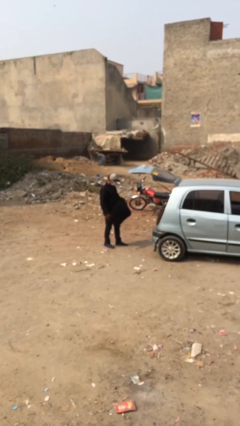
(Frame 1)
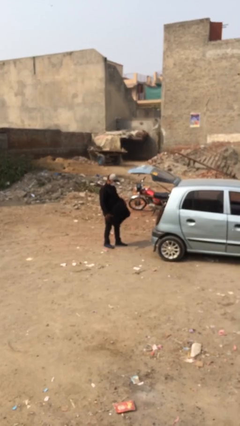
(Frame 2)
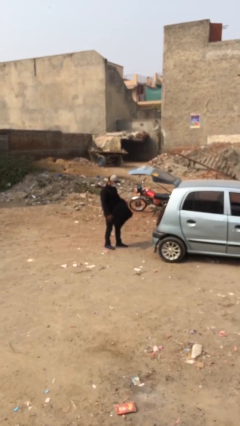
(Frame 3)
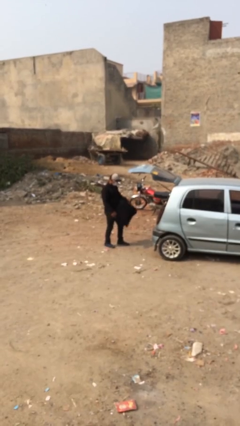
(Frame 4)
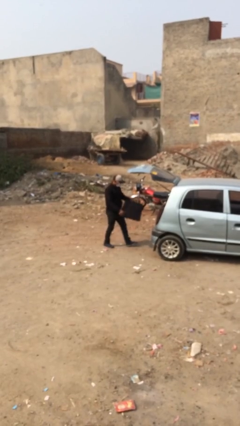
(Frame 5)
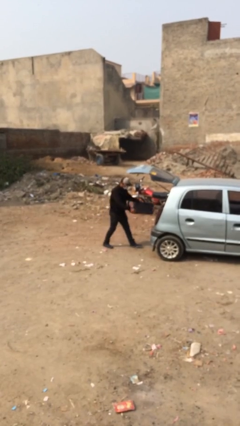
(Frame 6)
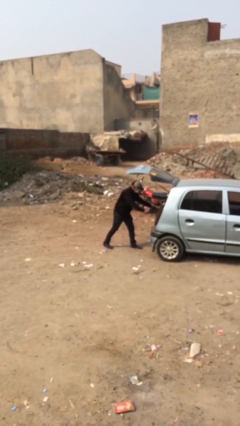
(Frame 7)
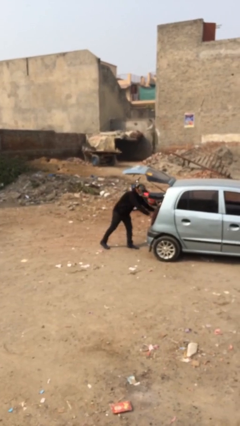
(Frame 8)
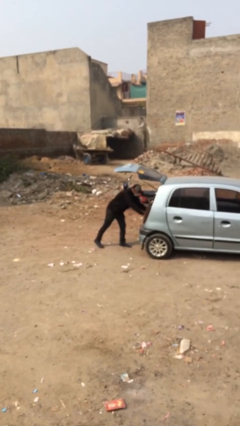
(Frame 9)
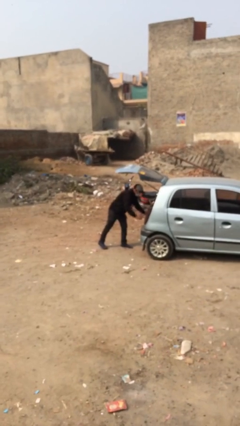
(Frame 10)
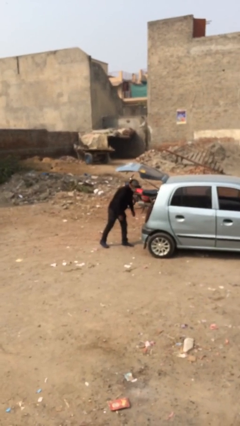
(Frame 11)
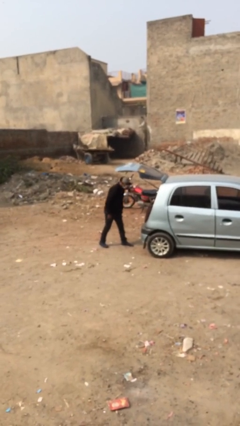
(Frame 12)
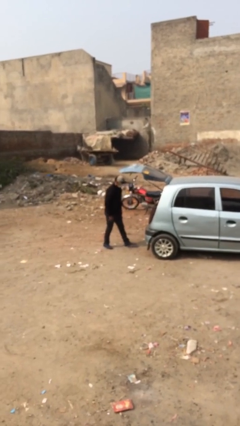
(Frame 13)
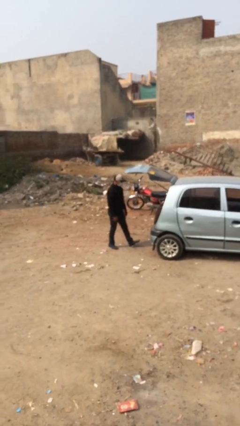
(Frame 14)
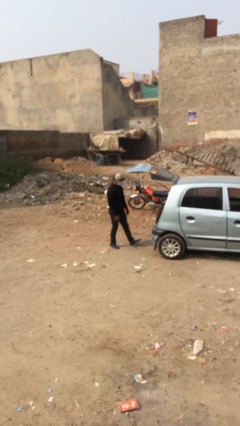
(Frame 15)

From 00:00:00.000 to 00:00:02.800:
person loads car

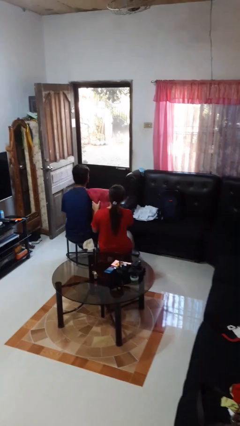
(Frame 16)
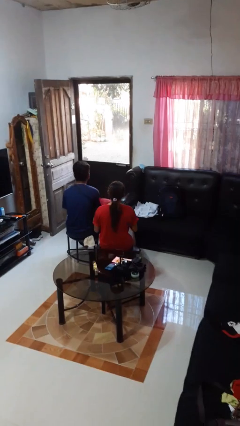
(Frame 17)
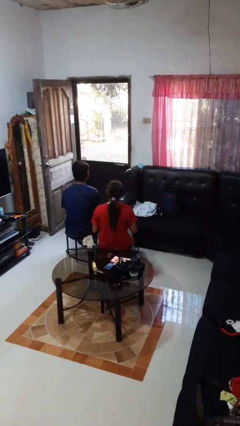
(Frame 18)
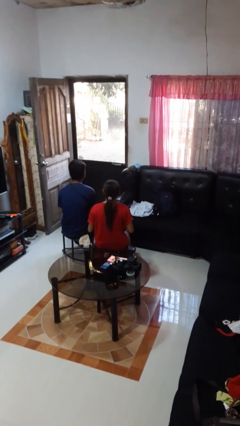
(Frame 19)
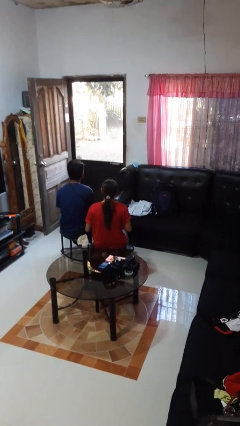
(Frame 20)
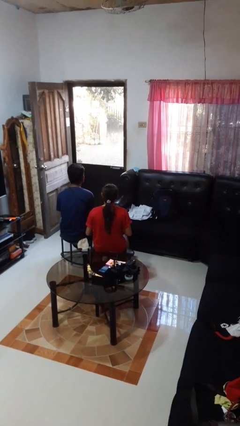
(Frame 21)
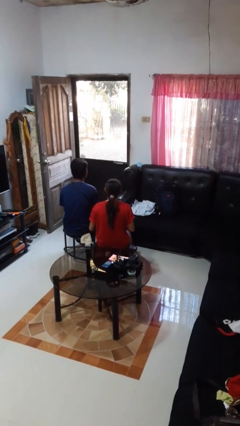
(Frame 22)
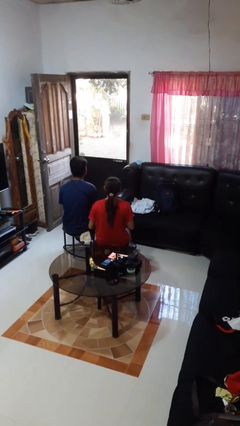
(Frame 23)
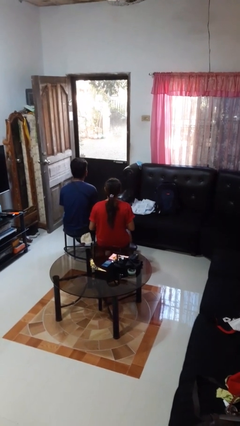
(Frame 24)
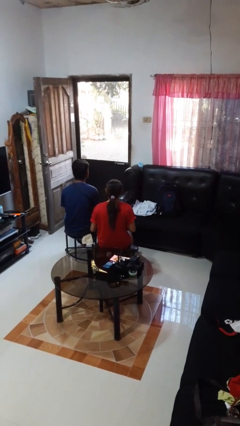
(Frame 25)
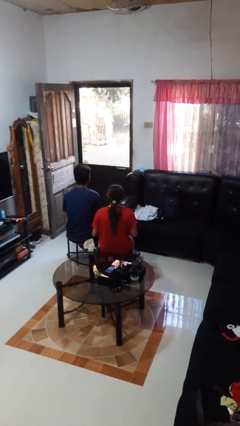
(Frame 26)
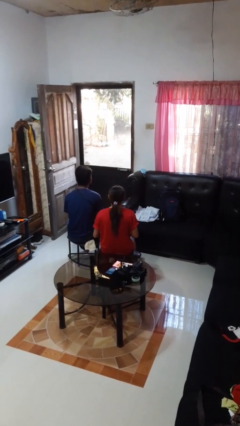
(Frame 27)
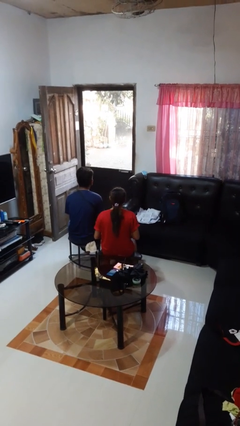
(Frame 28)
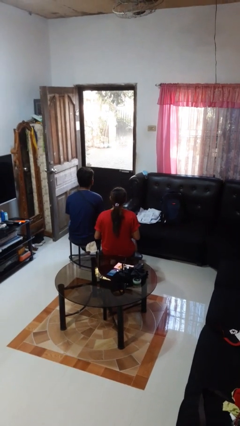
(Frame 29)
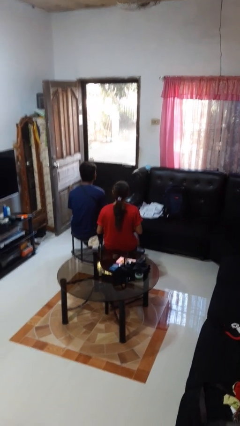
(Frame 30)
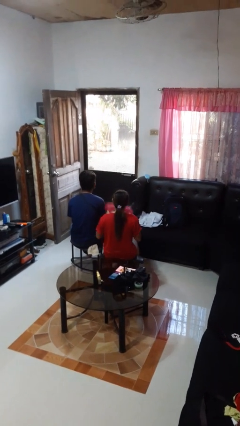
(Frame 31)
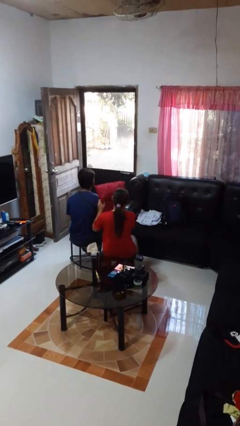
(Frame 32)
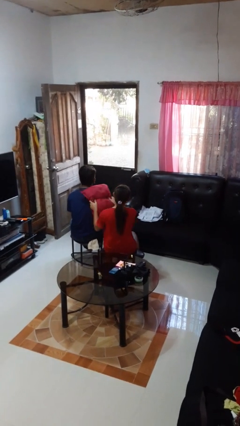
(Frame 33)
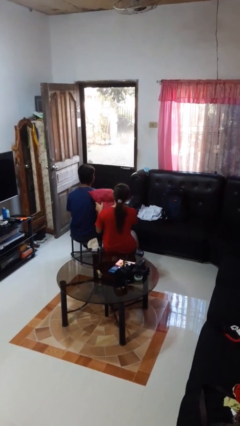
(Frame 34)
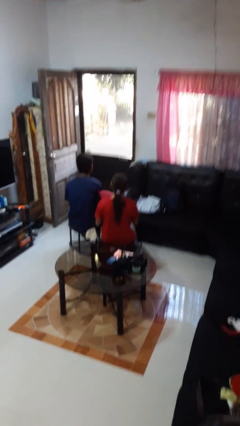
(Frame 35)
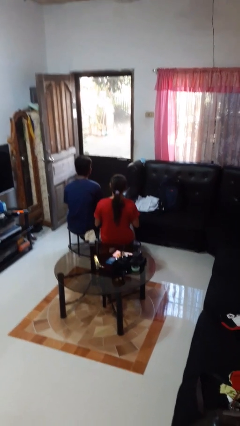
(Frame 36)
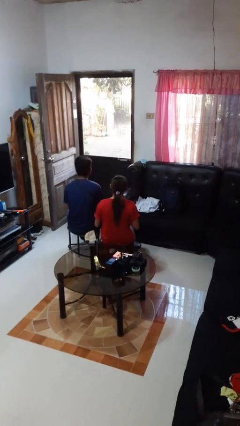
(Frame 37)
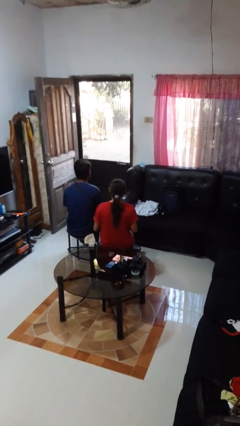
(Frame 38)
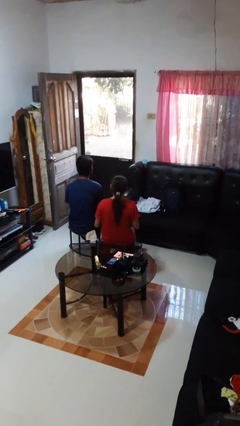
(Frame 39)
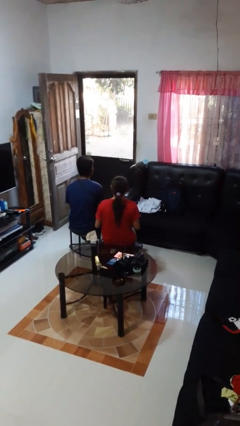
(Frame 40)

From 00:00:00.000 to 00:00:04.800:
person hits person with pillow

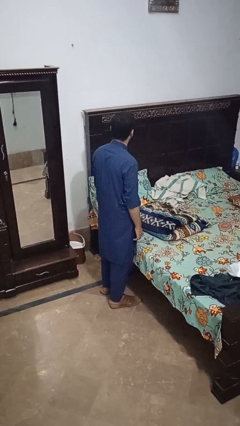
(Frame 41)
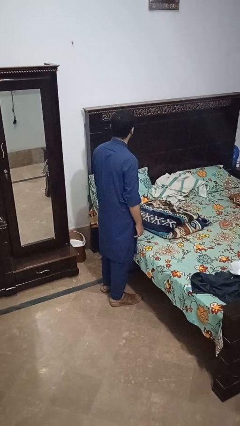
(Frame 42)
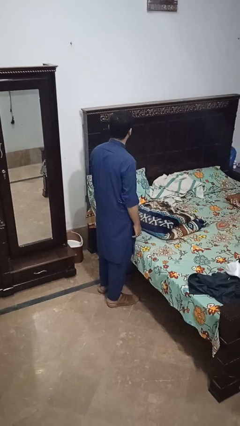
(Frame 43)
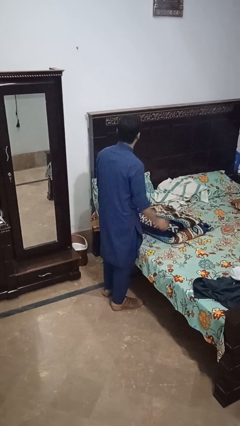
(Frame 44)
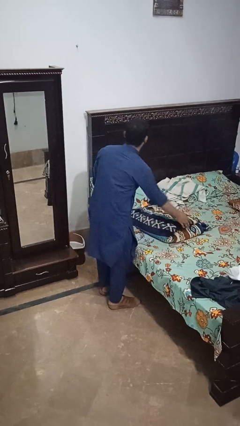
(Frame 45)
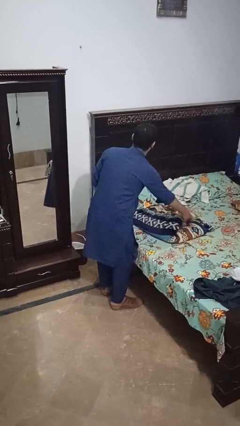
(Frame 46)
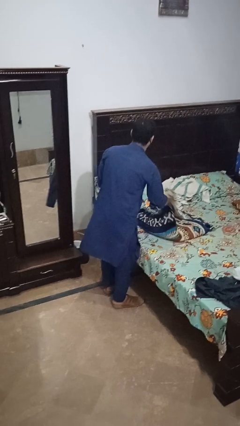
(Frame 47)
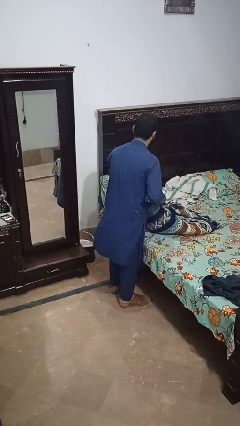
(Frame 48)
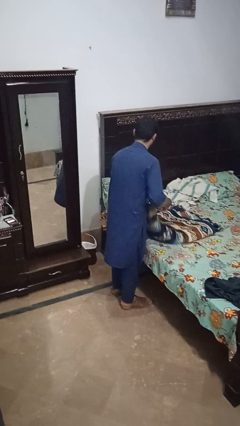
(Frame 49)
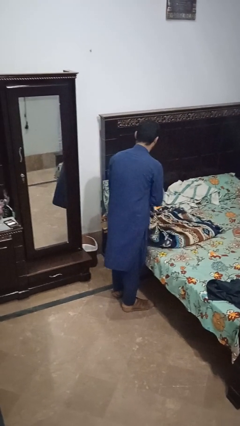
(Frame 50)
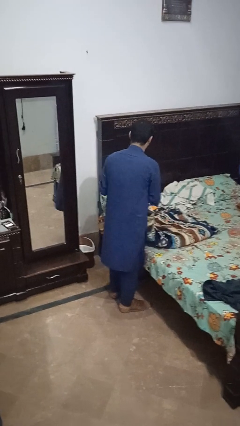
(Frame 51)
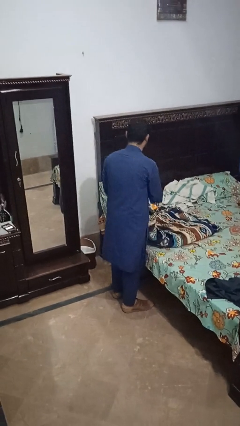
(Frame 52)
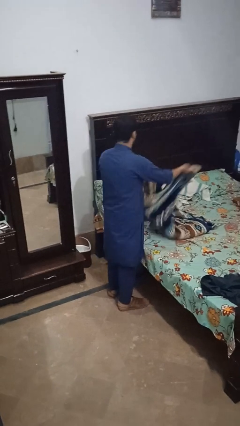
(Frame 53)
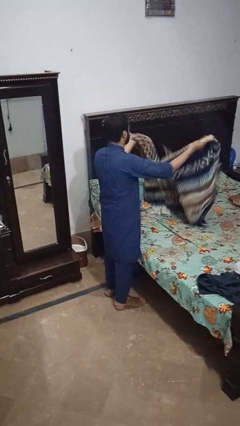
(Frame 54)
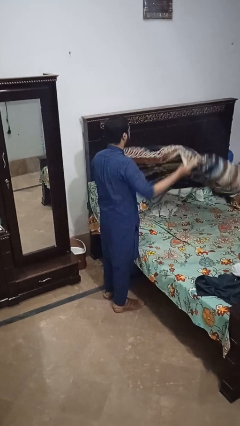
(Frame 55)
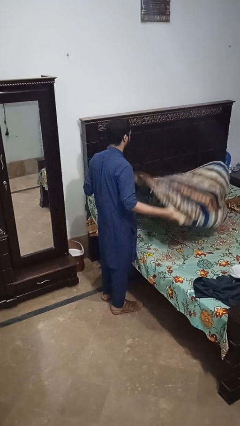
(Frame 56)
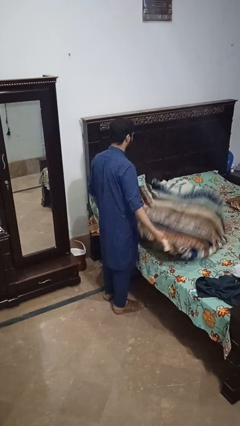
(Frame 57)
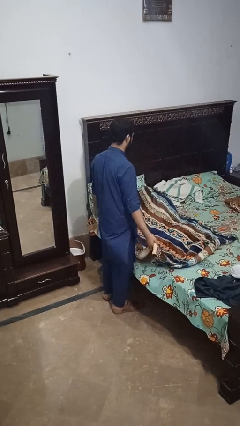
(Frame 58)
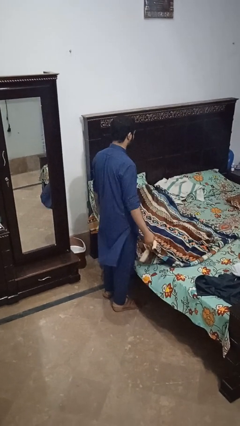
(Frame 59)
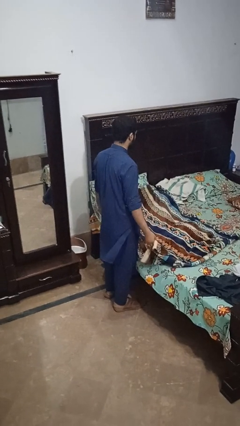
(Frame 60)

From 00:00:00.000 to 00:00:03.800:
person unfolds blanket

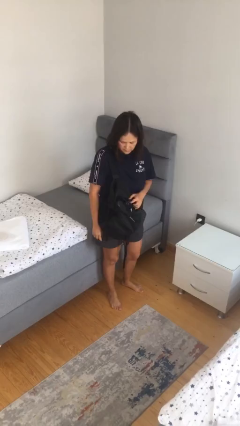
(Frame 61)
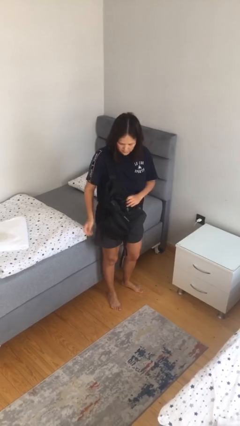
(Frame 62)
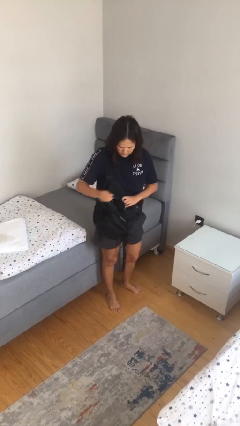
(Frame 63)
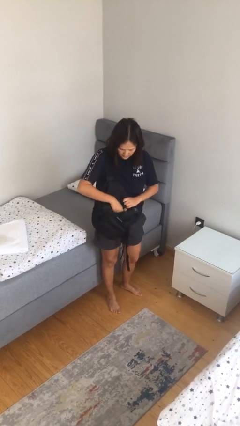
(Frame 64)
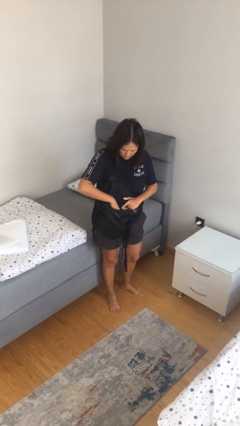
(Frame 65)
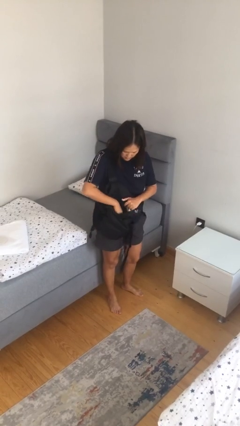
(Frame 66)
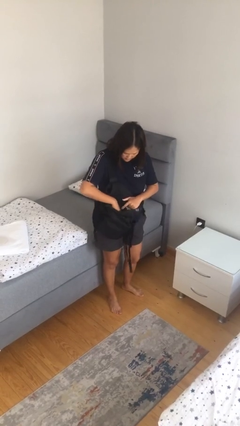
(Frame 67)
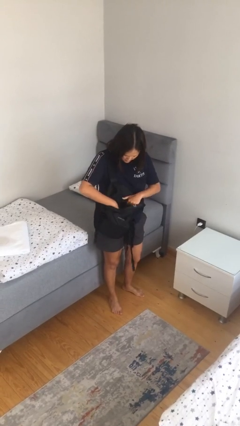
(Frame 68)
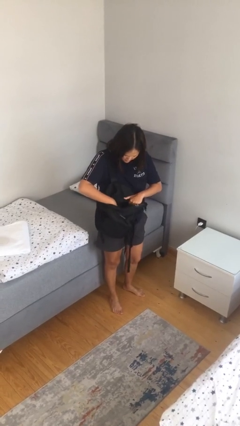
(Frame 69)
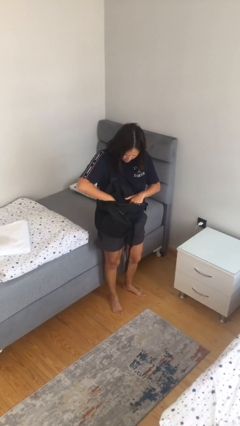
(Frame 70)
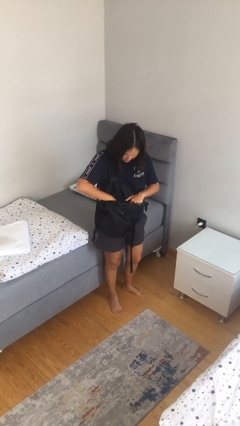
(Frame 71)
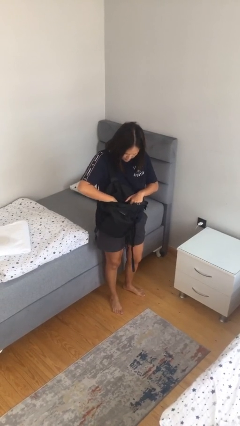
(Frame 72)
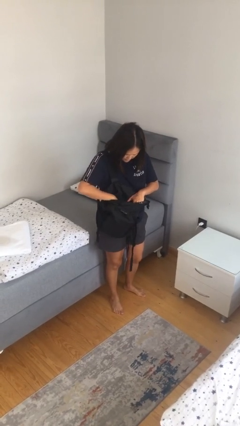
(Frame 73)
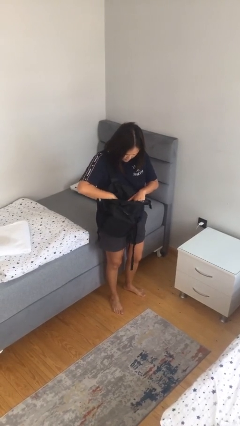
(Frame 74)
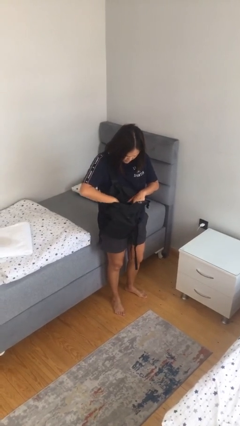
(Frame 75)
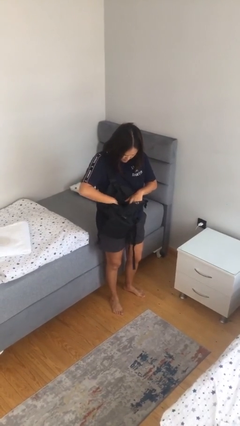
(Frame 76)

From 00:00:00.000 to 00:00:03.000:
person searches in backpack

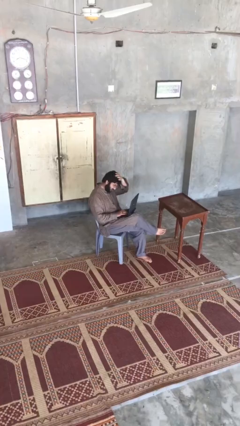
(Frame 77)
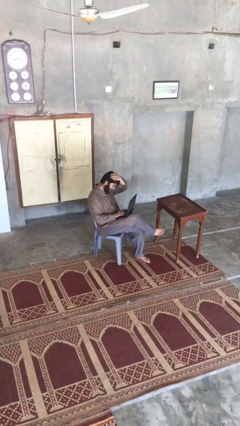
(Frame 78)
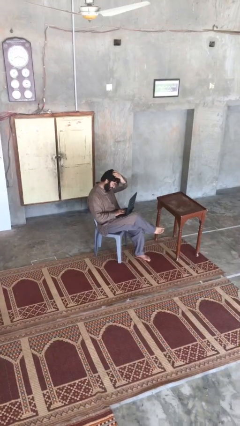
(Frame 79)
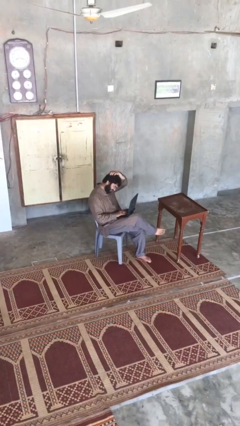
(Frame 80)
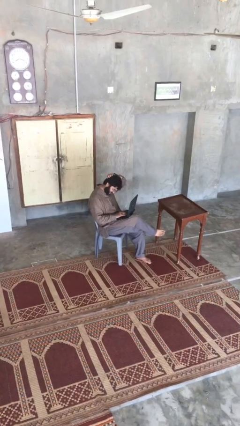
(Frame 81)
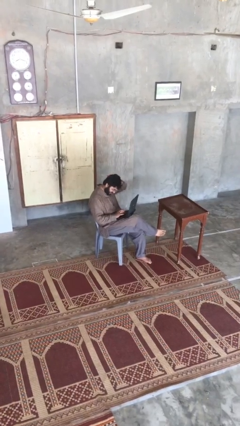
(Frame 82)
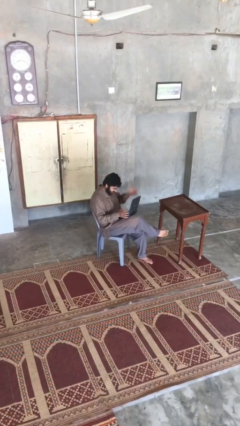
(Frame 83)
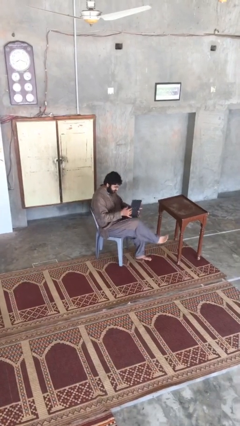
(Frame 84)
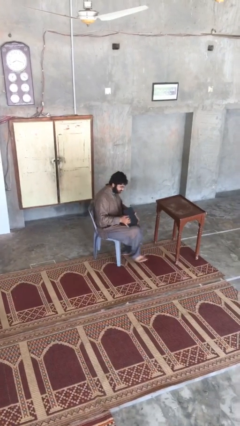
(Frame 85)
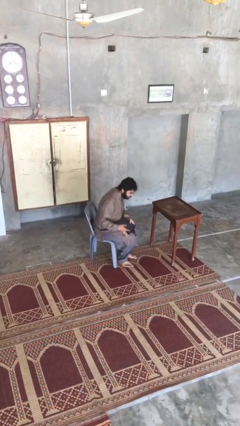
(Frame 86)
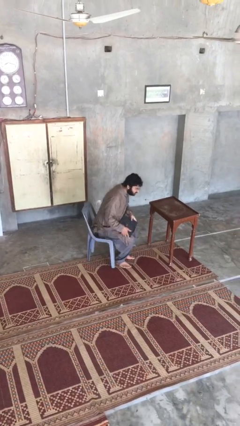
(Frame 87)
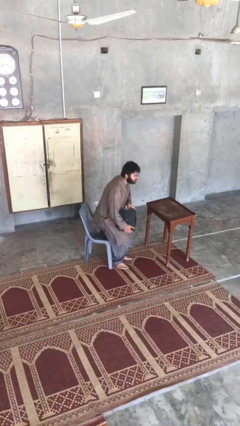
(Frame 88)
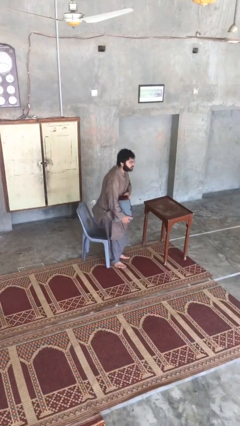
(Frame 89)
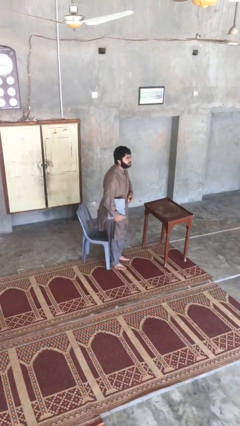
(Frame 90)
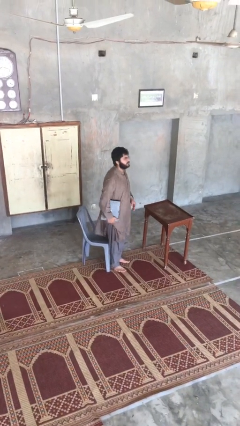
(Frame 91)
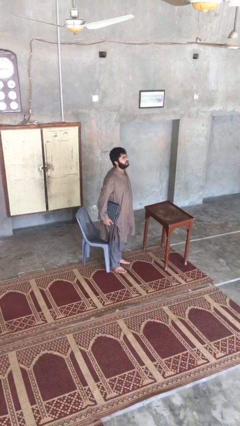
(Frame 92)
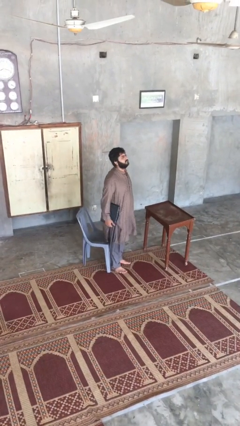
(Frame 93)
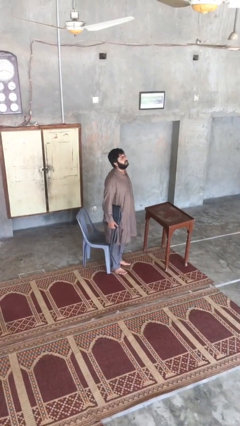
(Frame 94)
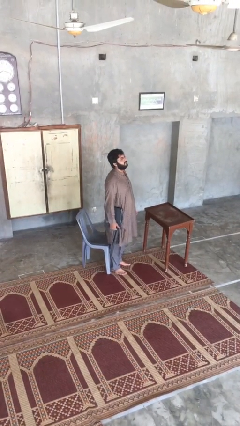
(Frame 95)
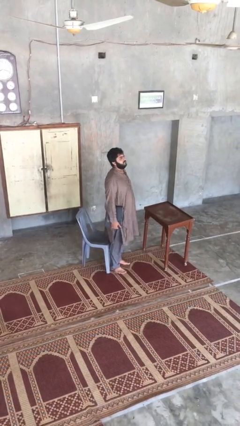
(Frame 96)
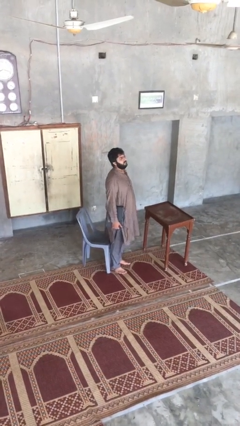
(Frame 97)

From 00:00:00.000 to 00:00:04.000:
person stands up
